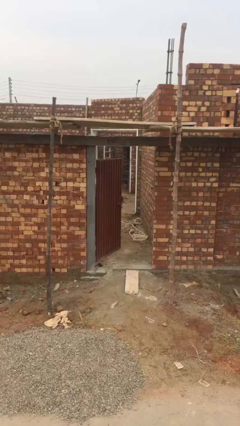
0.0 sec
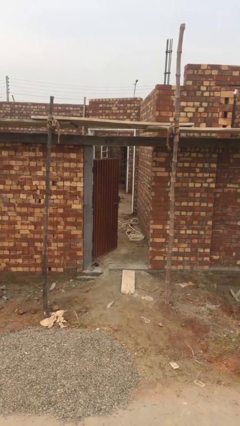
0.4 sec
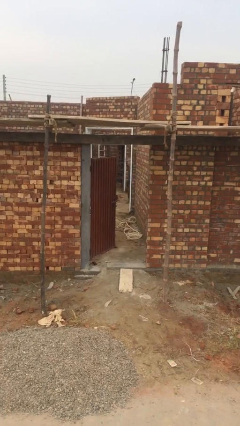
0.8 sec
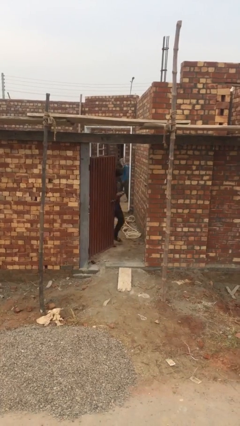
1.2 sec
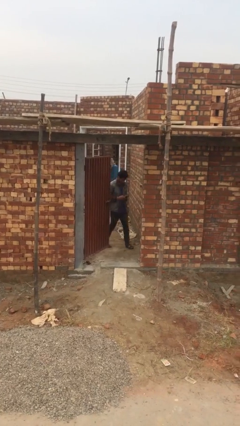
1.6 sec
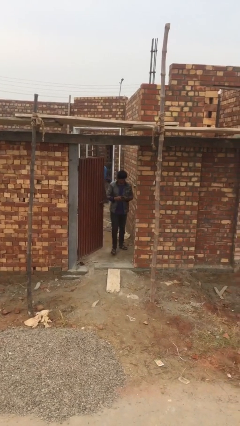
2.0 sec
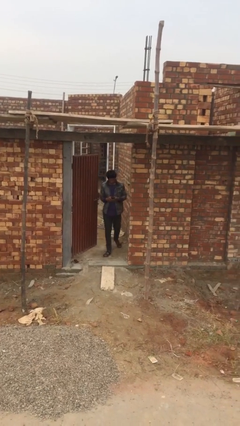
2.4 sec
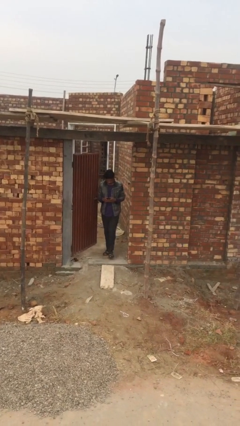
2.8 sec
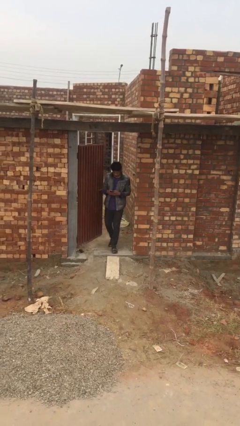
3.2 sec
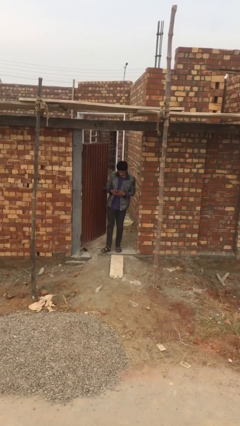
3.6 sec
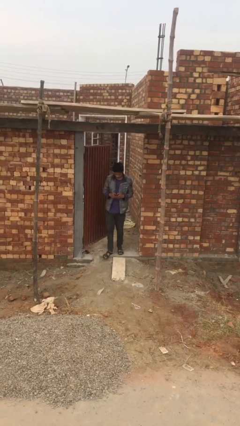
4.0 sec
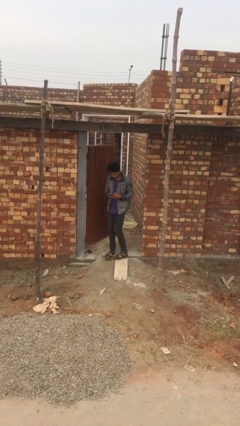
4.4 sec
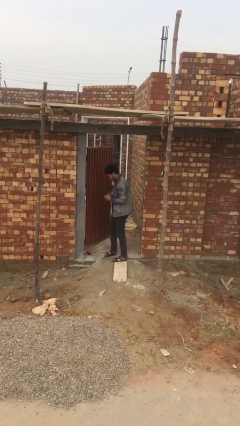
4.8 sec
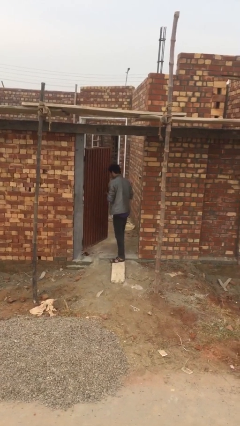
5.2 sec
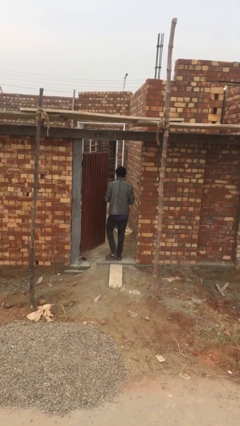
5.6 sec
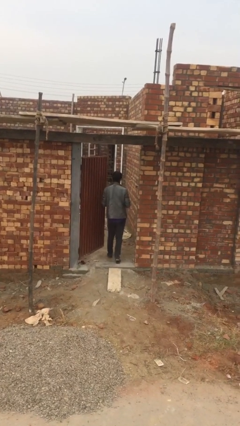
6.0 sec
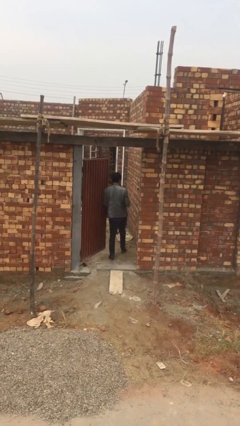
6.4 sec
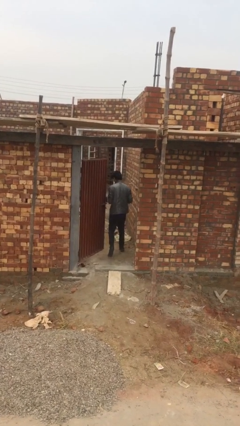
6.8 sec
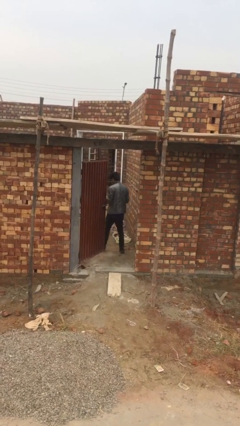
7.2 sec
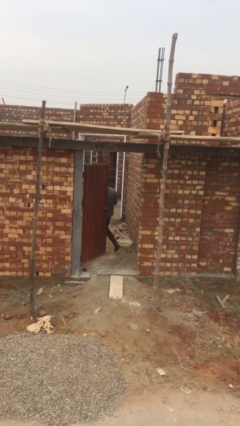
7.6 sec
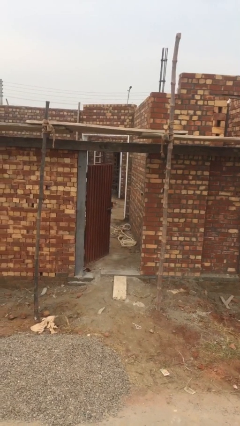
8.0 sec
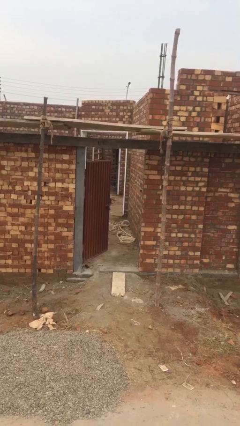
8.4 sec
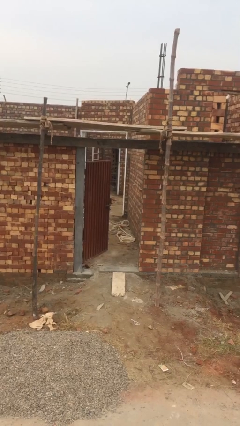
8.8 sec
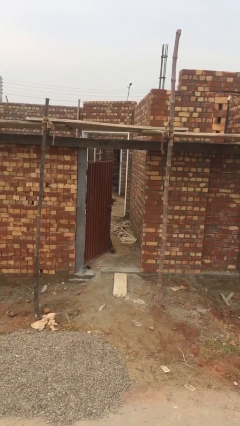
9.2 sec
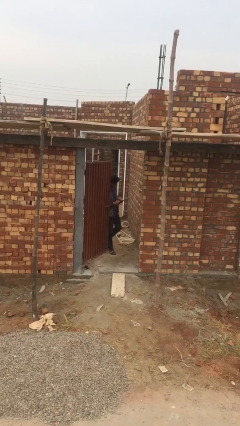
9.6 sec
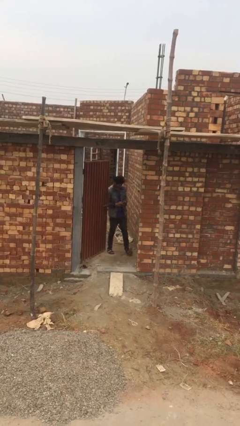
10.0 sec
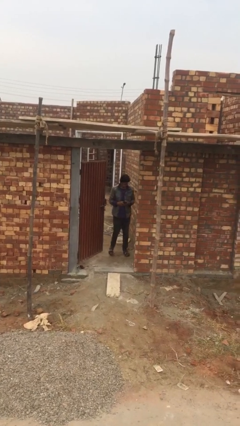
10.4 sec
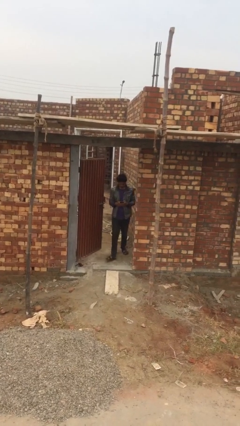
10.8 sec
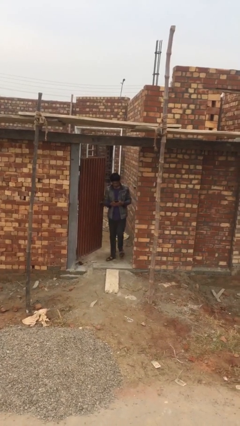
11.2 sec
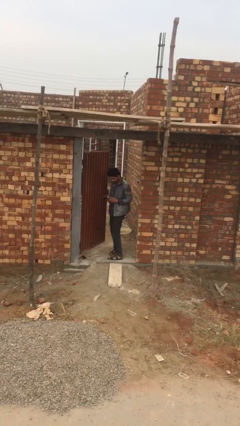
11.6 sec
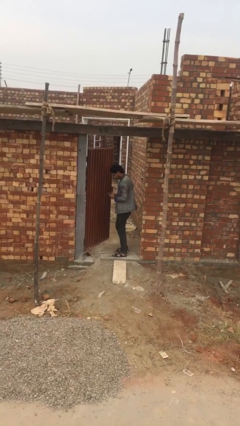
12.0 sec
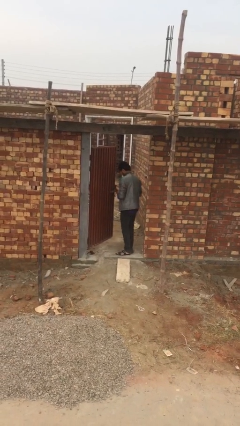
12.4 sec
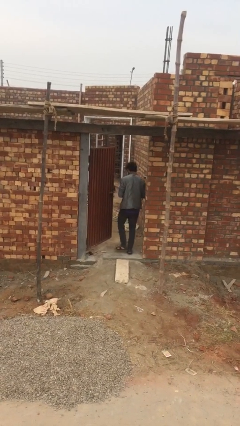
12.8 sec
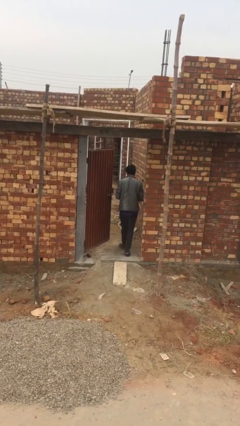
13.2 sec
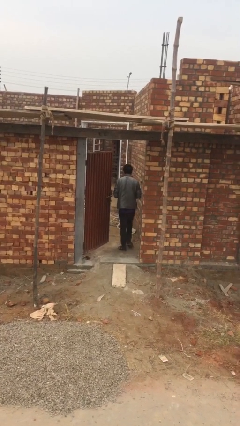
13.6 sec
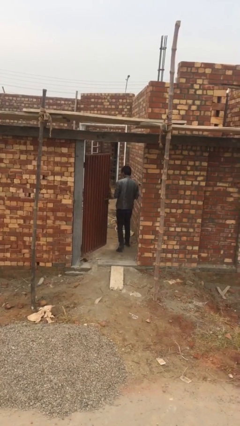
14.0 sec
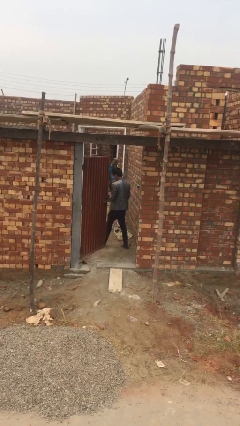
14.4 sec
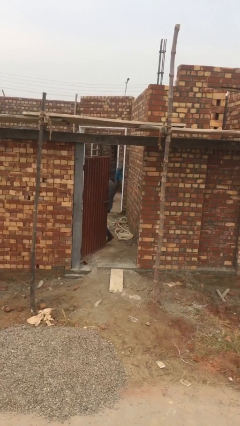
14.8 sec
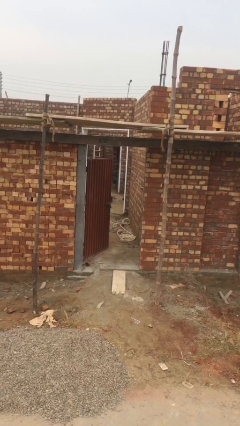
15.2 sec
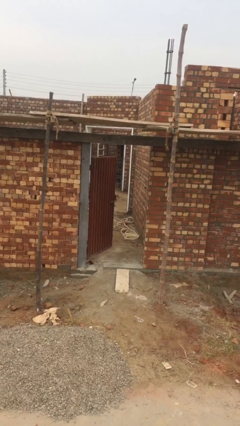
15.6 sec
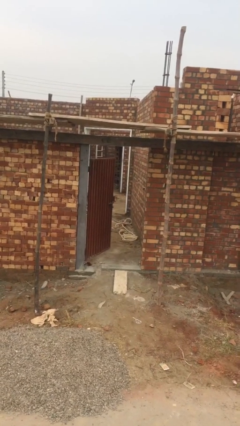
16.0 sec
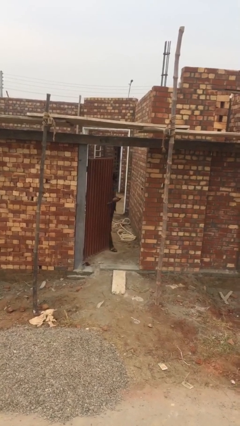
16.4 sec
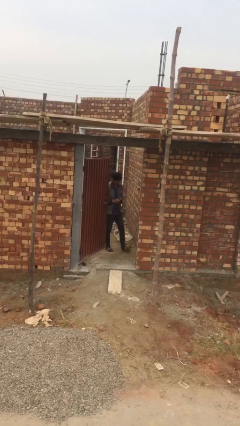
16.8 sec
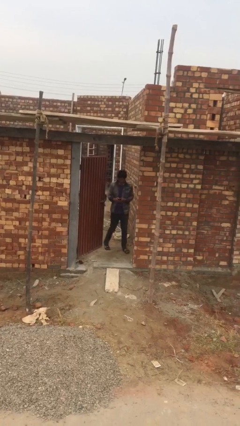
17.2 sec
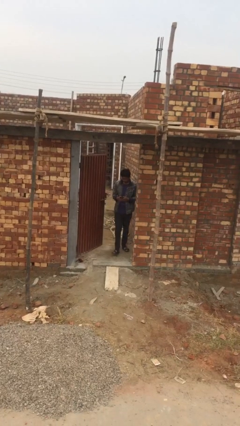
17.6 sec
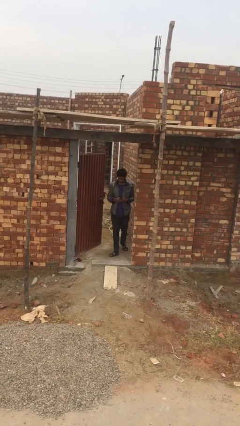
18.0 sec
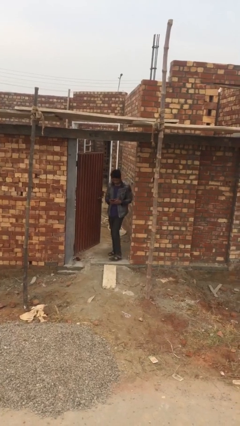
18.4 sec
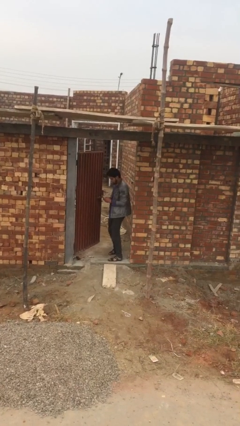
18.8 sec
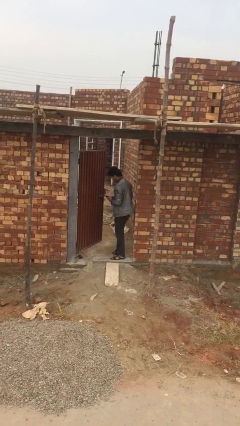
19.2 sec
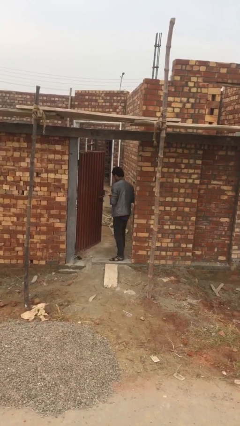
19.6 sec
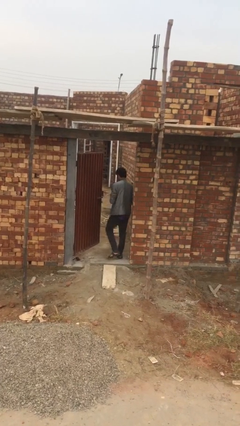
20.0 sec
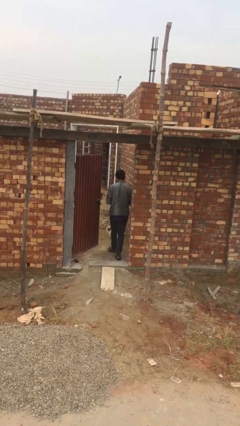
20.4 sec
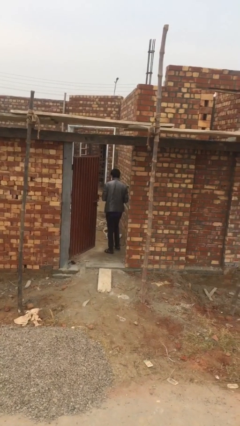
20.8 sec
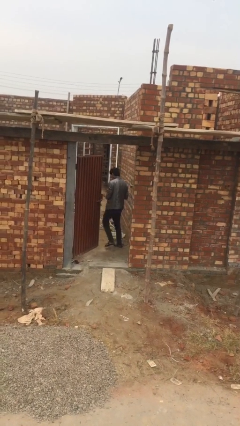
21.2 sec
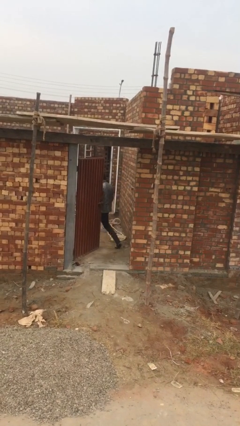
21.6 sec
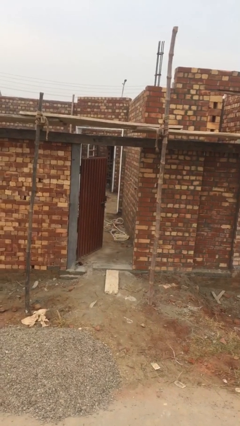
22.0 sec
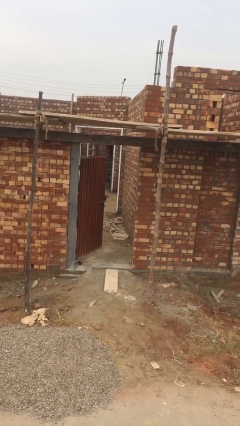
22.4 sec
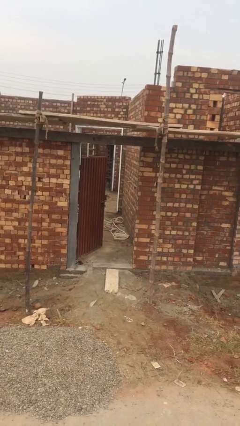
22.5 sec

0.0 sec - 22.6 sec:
person texts on phone

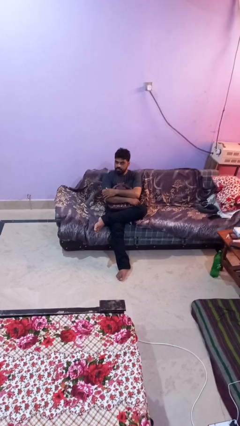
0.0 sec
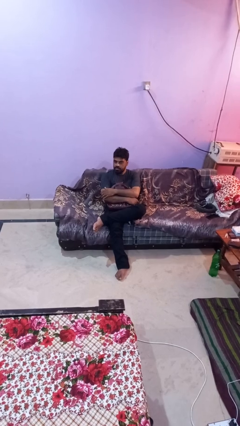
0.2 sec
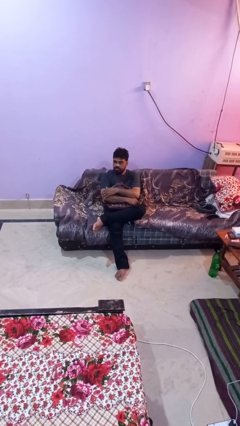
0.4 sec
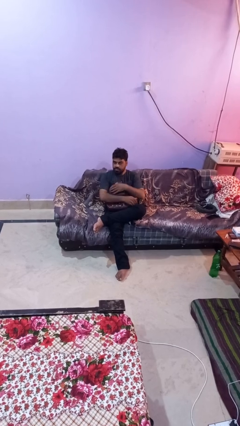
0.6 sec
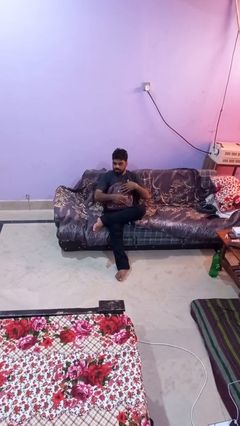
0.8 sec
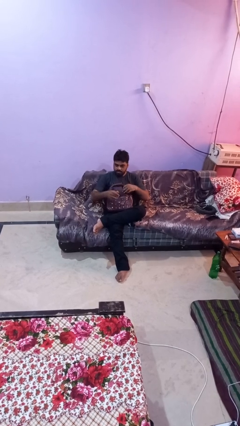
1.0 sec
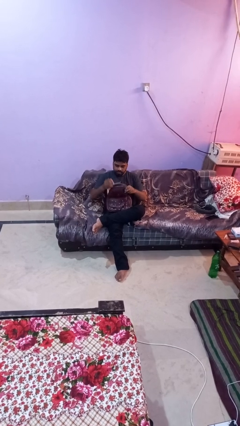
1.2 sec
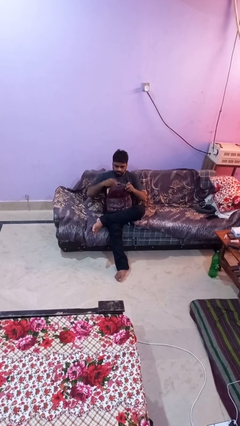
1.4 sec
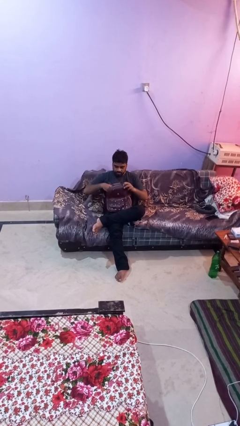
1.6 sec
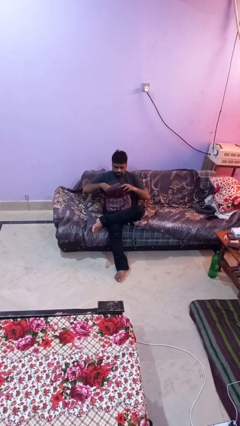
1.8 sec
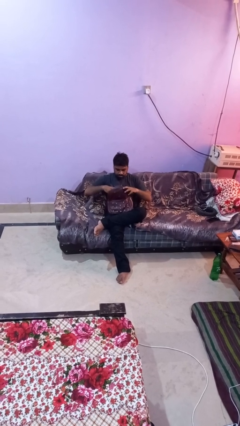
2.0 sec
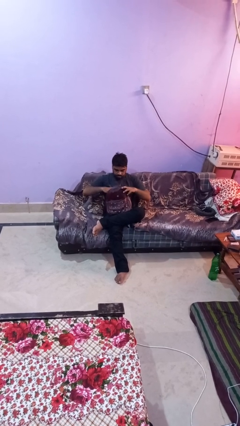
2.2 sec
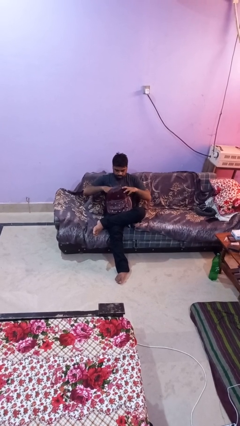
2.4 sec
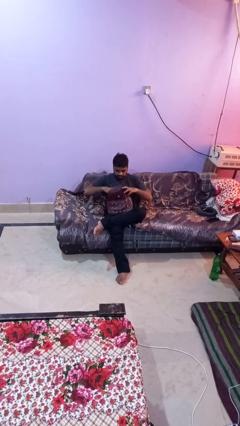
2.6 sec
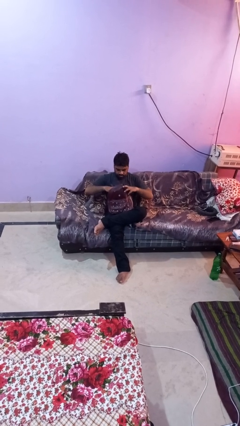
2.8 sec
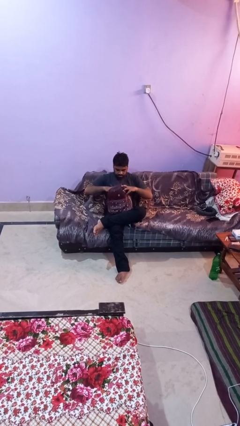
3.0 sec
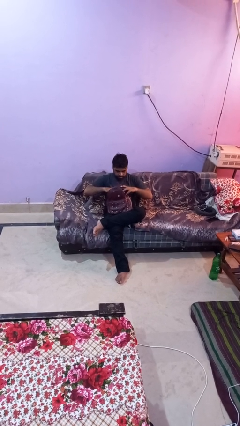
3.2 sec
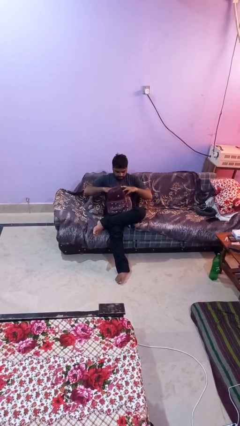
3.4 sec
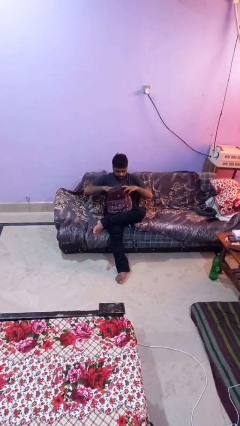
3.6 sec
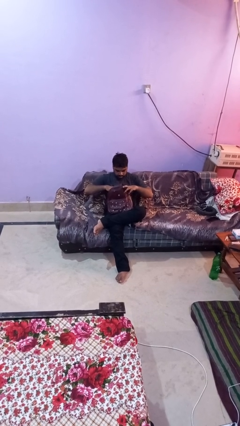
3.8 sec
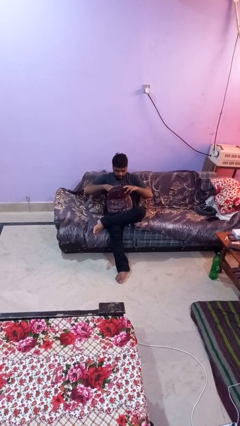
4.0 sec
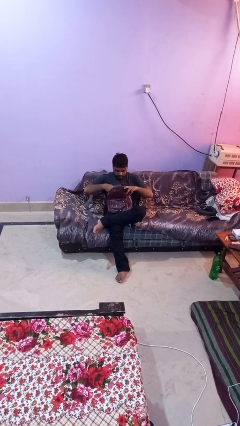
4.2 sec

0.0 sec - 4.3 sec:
person searches in backpack

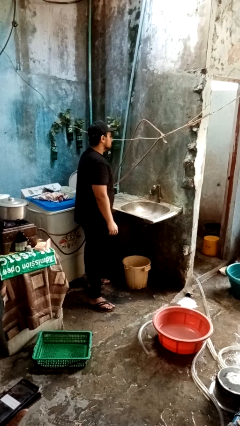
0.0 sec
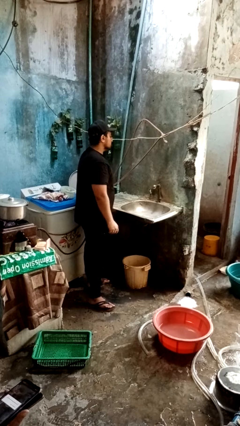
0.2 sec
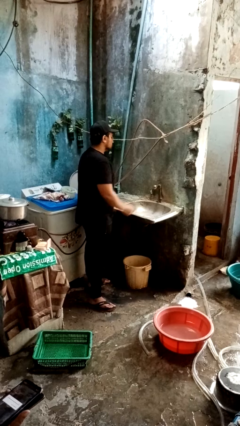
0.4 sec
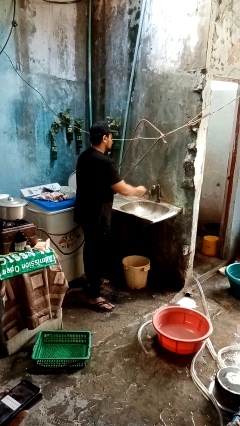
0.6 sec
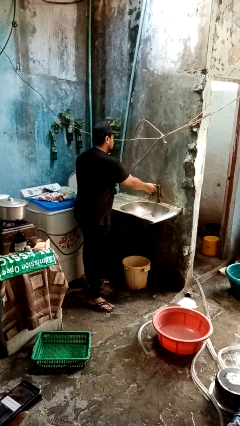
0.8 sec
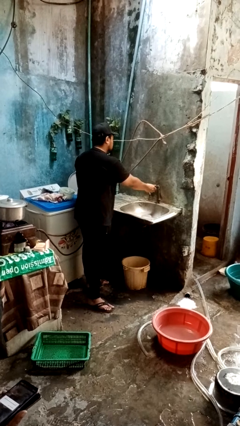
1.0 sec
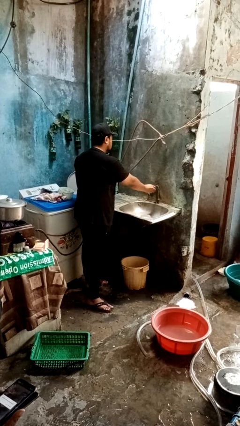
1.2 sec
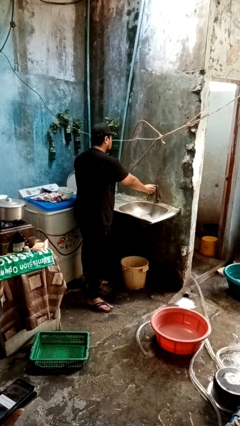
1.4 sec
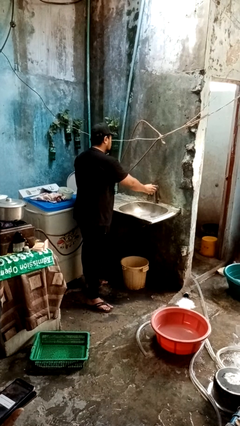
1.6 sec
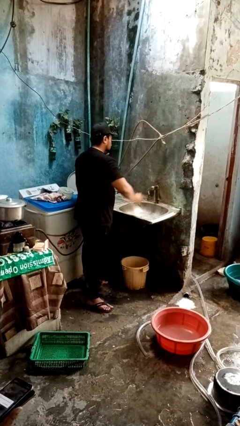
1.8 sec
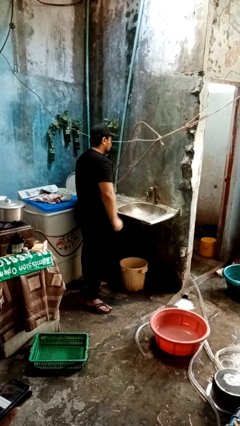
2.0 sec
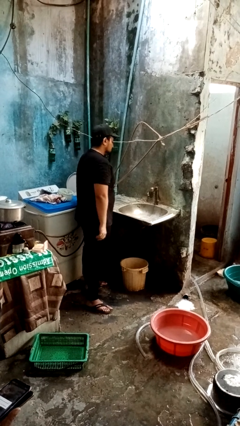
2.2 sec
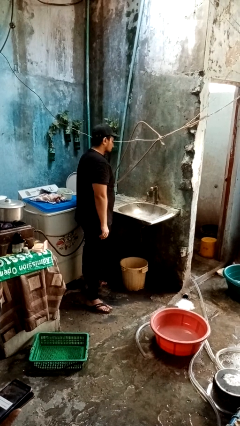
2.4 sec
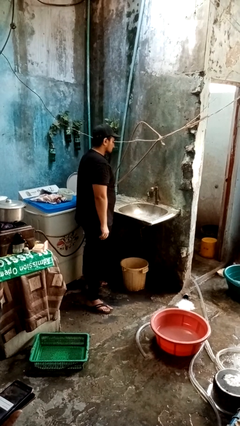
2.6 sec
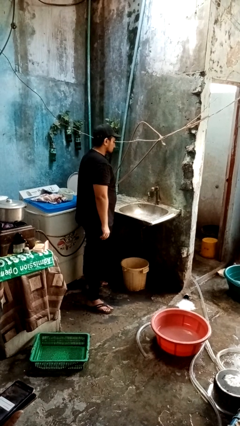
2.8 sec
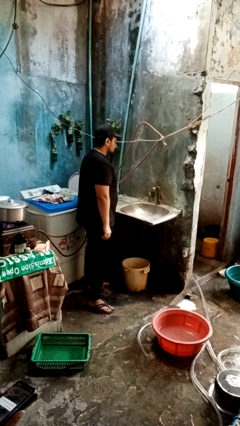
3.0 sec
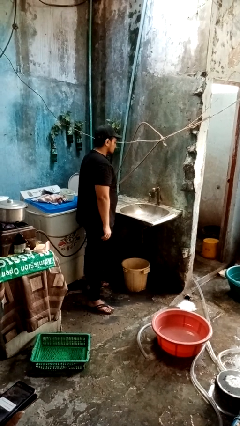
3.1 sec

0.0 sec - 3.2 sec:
person turns on faucet
